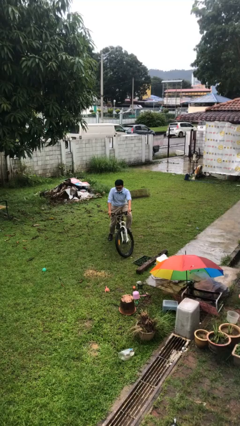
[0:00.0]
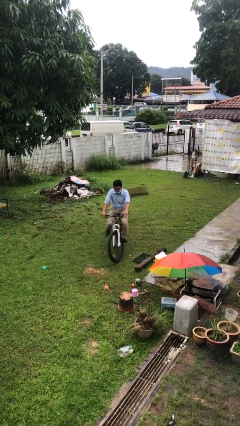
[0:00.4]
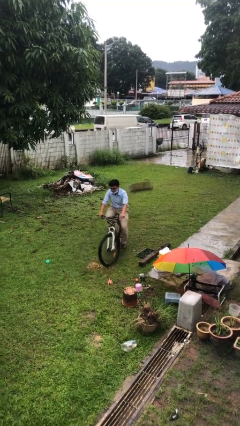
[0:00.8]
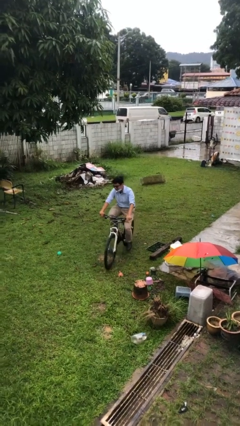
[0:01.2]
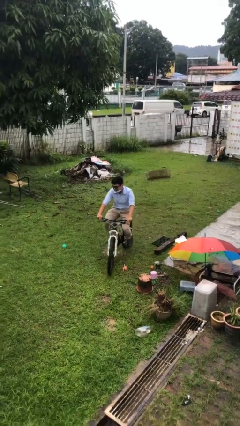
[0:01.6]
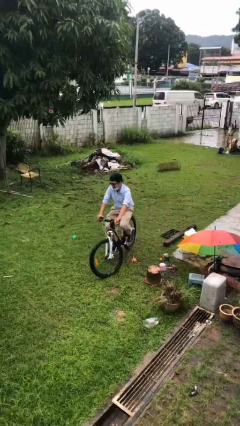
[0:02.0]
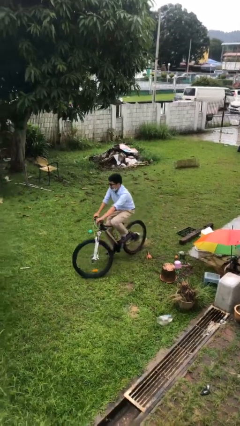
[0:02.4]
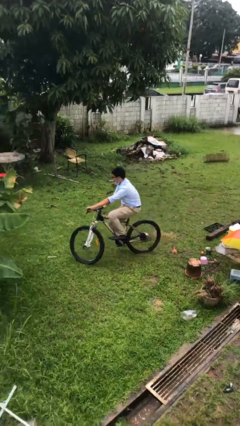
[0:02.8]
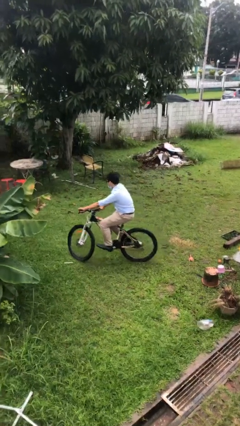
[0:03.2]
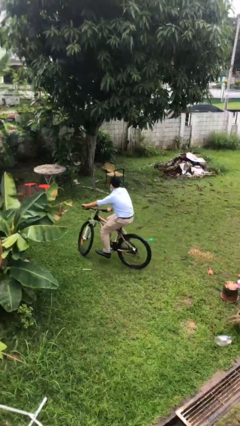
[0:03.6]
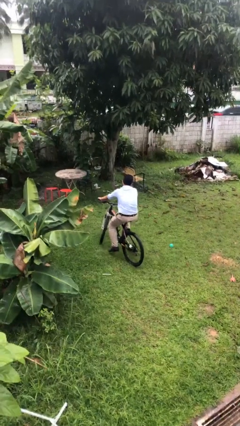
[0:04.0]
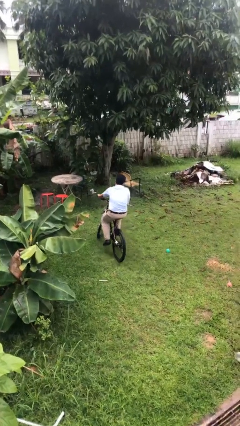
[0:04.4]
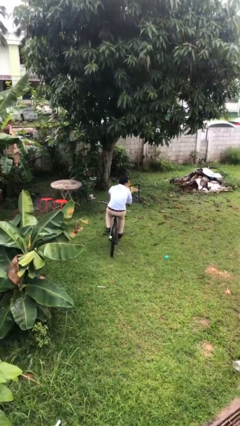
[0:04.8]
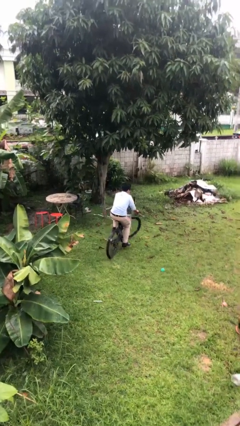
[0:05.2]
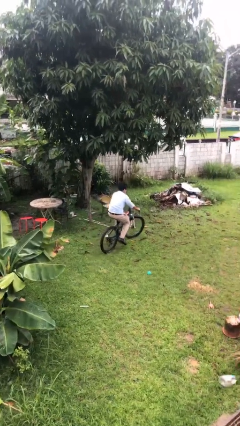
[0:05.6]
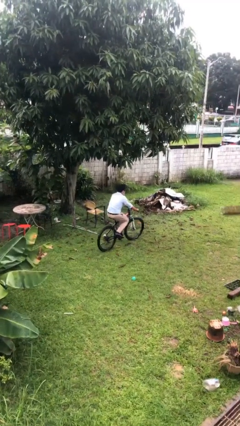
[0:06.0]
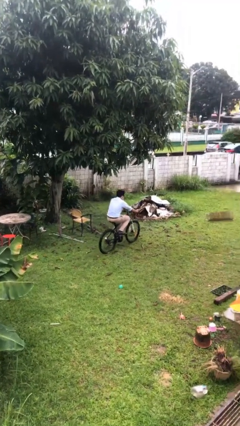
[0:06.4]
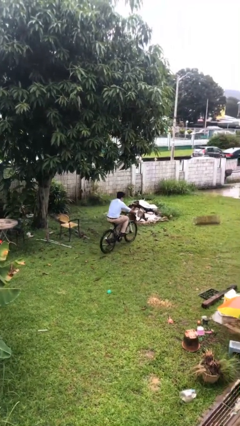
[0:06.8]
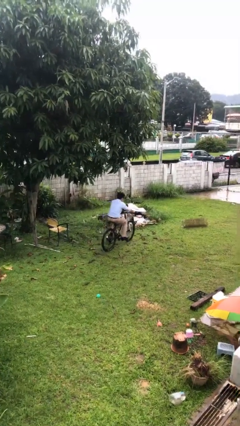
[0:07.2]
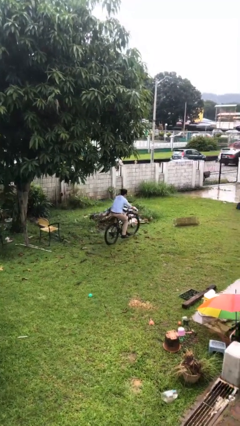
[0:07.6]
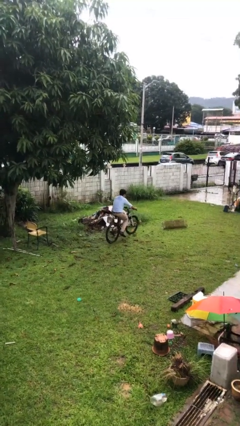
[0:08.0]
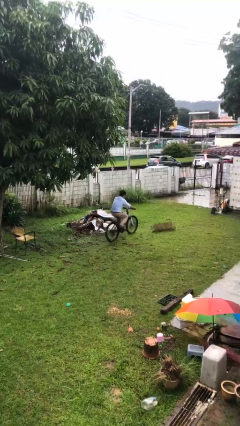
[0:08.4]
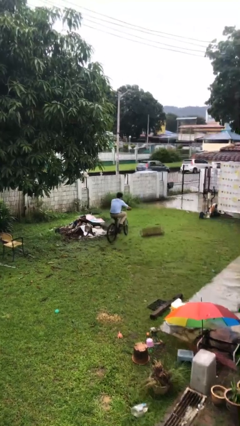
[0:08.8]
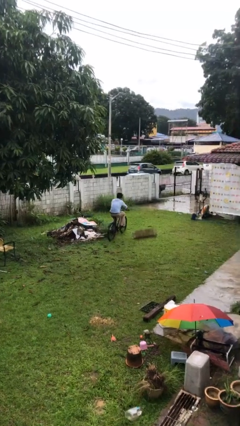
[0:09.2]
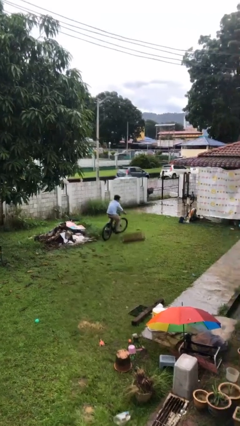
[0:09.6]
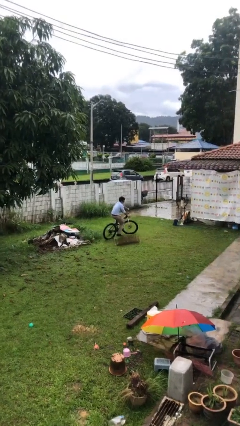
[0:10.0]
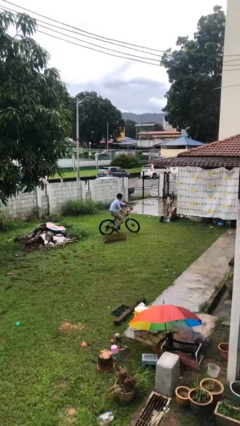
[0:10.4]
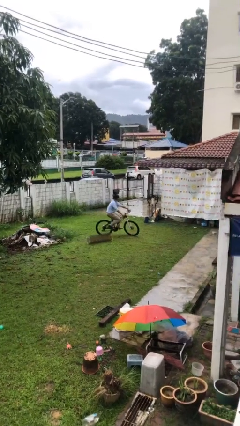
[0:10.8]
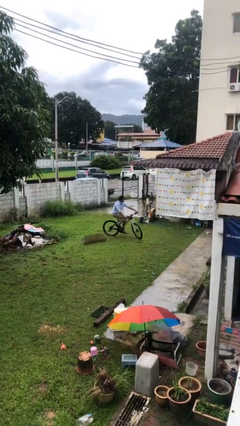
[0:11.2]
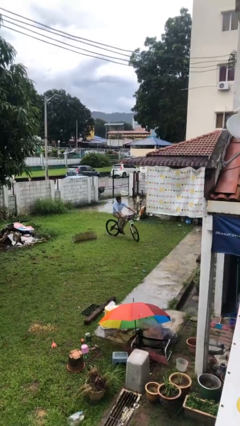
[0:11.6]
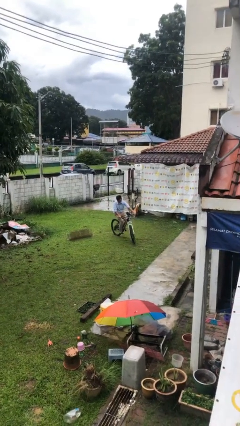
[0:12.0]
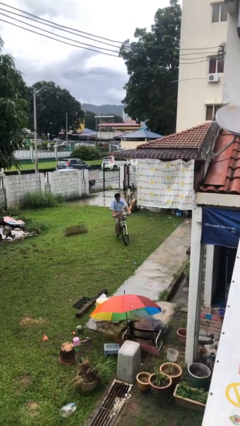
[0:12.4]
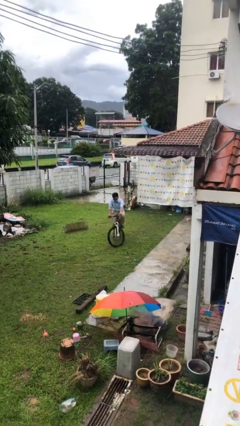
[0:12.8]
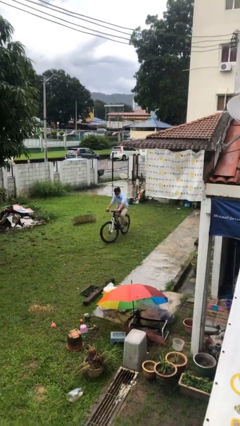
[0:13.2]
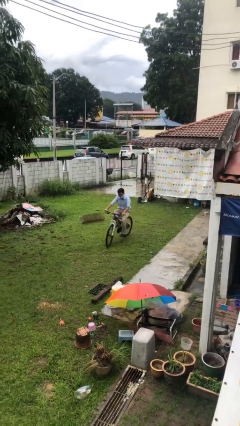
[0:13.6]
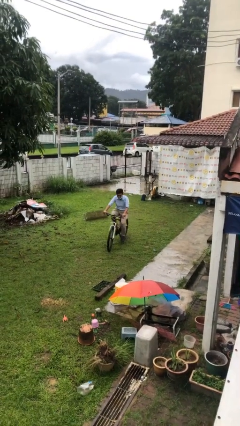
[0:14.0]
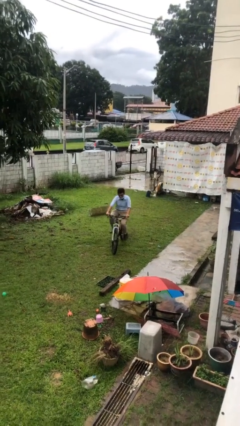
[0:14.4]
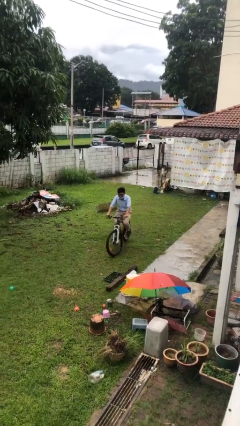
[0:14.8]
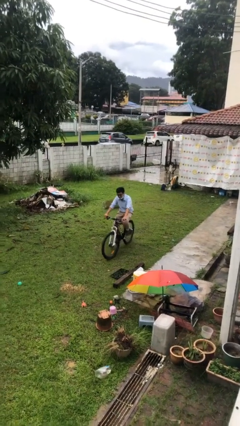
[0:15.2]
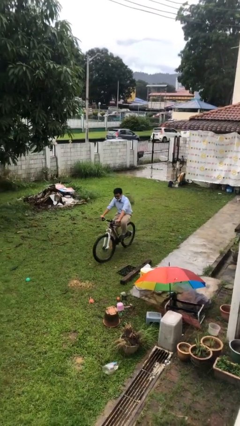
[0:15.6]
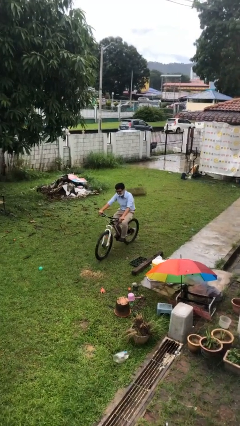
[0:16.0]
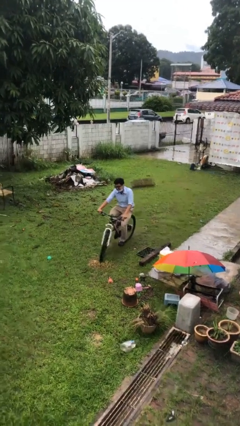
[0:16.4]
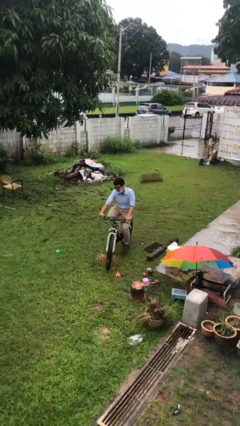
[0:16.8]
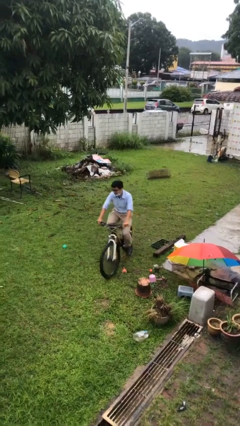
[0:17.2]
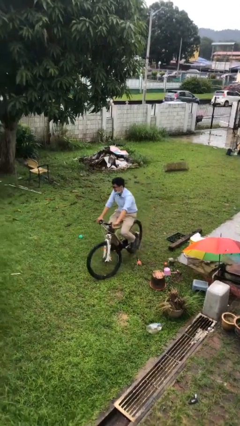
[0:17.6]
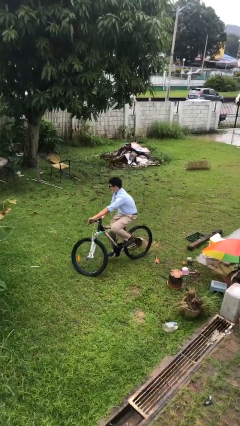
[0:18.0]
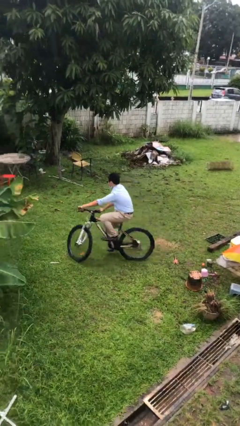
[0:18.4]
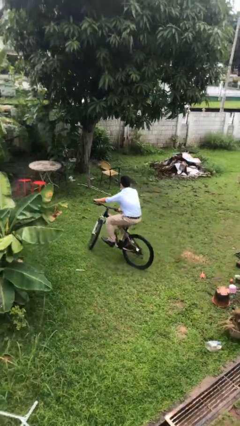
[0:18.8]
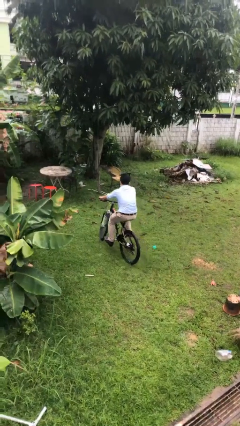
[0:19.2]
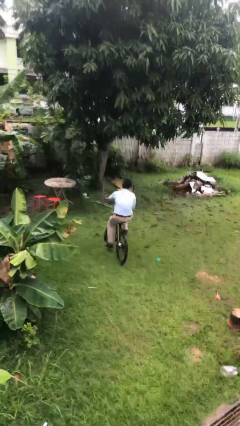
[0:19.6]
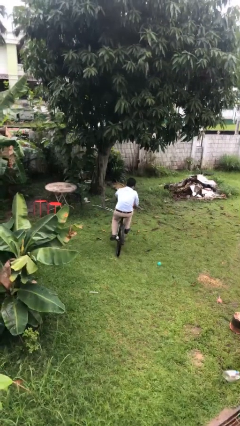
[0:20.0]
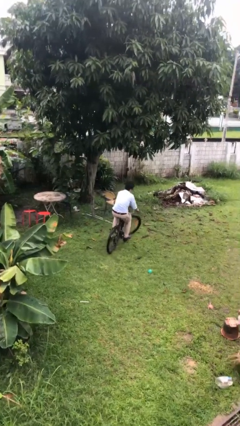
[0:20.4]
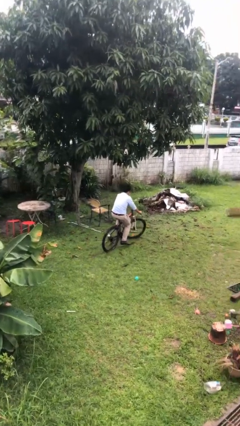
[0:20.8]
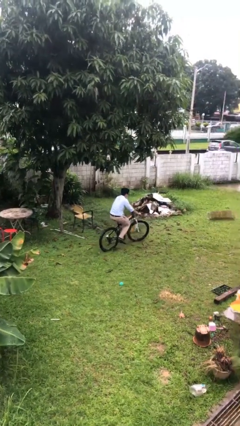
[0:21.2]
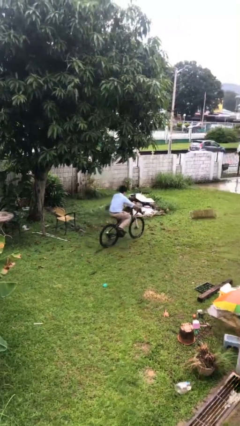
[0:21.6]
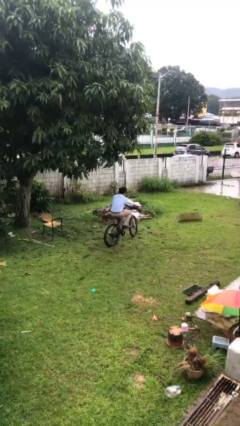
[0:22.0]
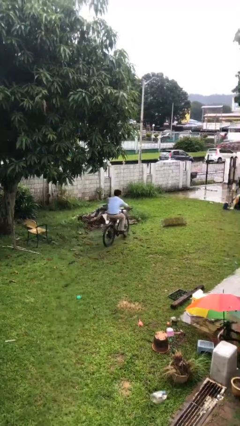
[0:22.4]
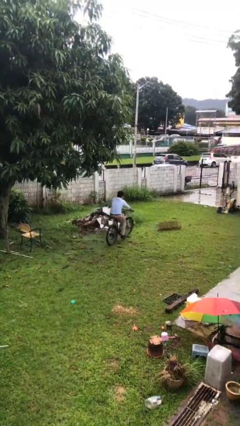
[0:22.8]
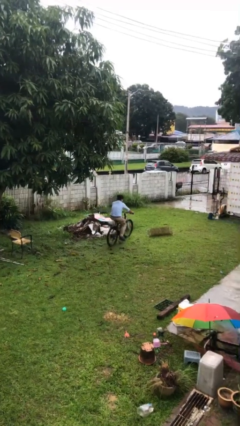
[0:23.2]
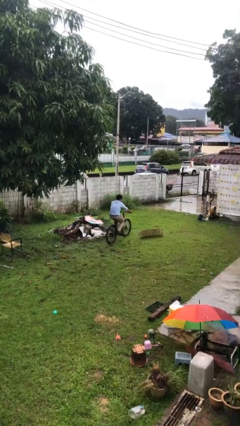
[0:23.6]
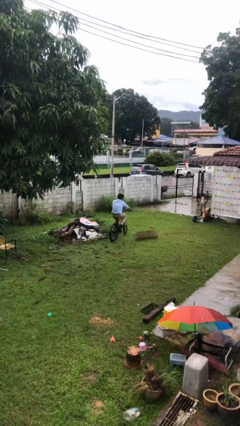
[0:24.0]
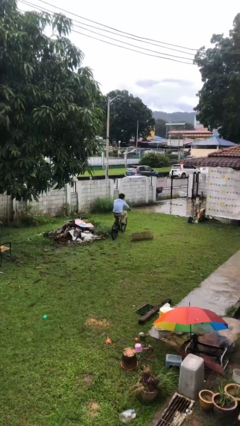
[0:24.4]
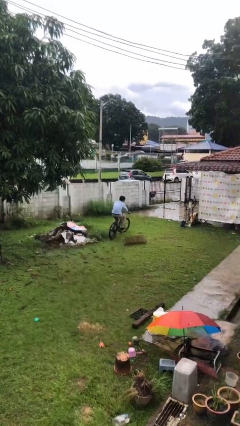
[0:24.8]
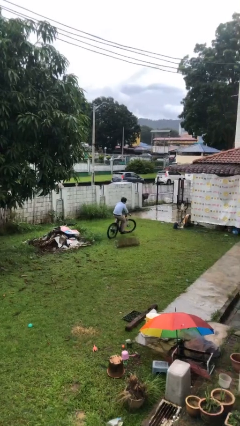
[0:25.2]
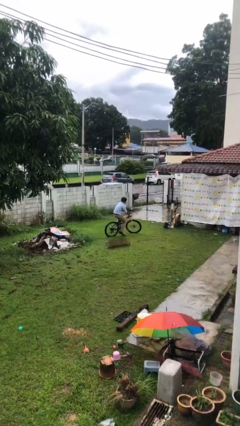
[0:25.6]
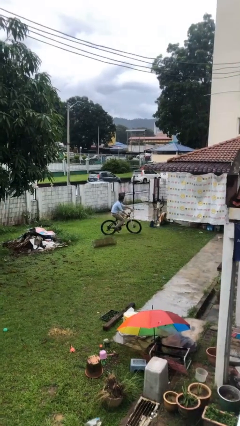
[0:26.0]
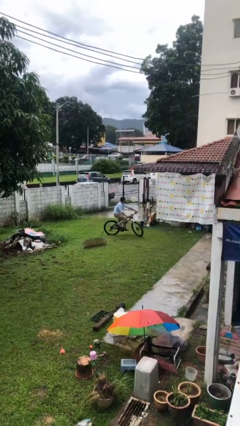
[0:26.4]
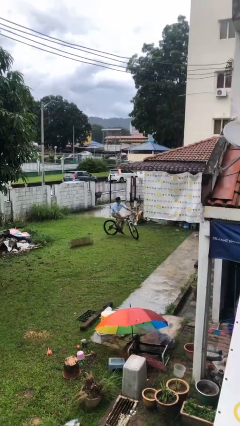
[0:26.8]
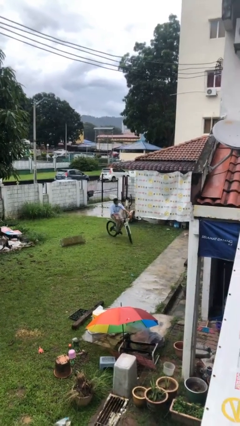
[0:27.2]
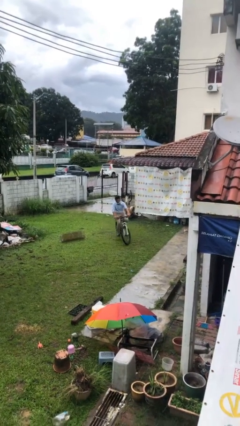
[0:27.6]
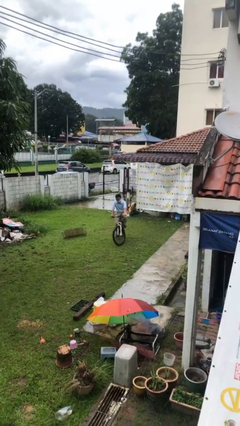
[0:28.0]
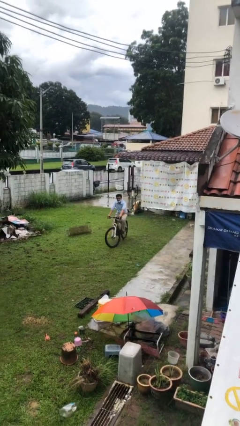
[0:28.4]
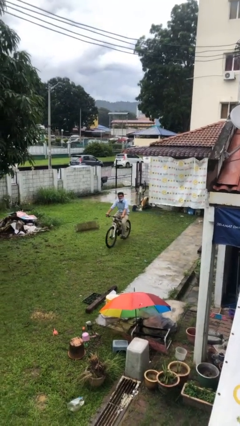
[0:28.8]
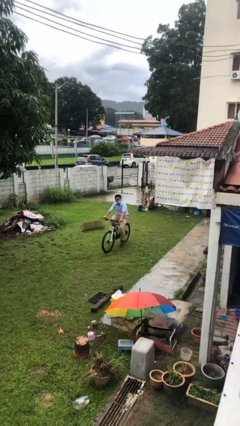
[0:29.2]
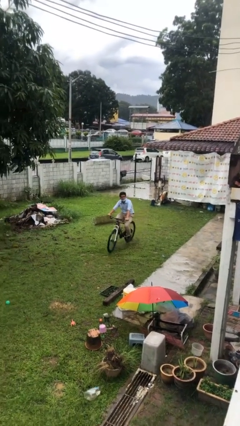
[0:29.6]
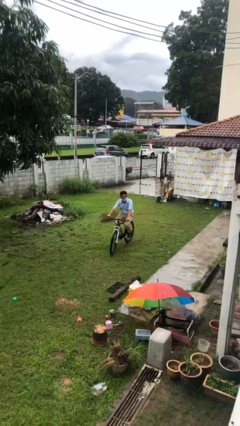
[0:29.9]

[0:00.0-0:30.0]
person rides bicycle

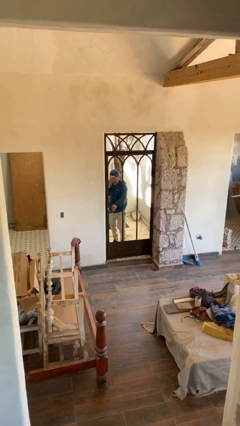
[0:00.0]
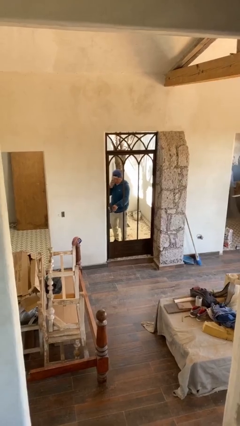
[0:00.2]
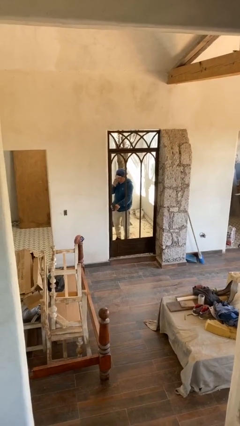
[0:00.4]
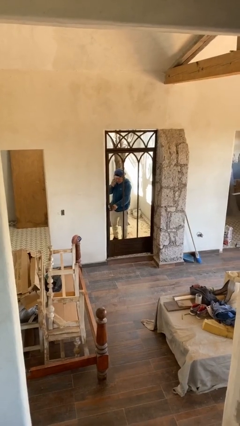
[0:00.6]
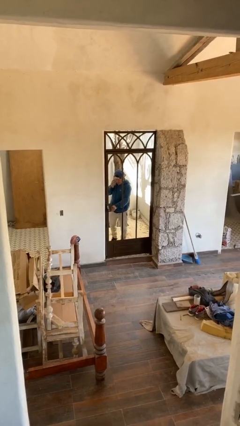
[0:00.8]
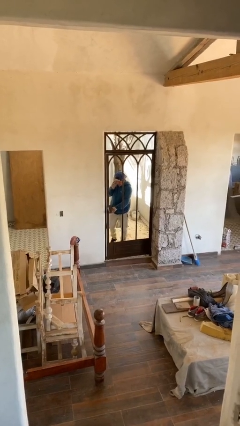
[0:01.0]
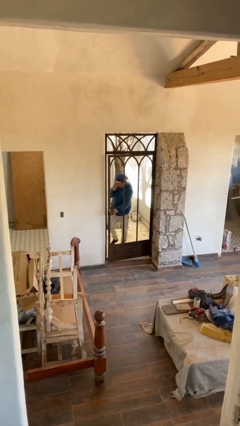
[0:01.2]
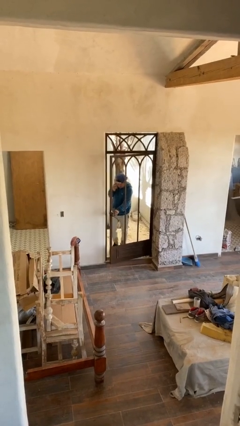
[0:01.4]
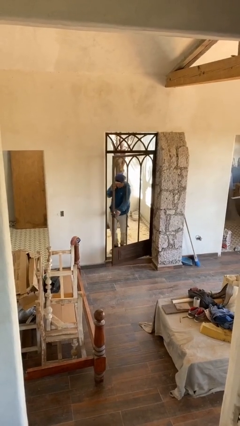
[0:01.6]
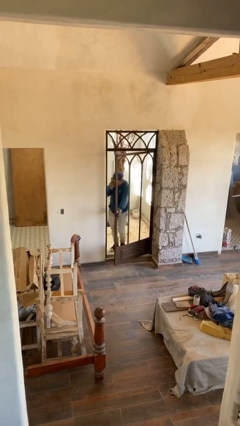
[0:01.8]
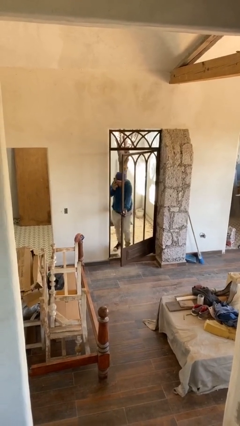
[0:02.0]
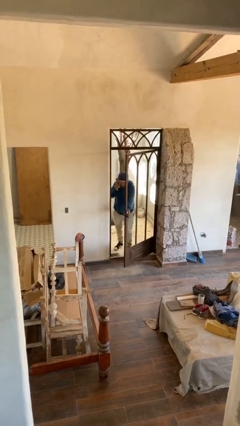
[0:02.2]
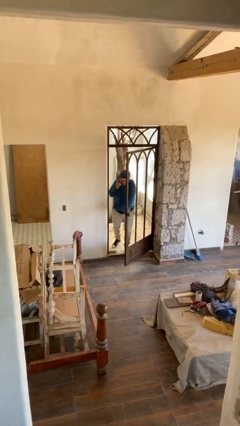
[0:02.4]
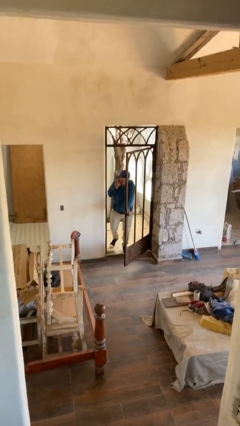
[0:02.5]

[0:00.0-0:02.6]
person opens facility door

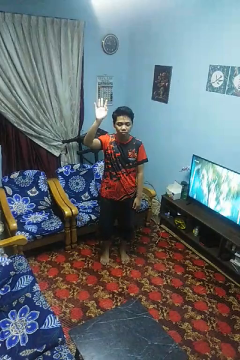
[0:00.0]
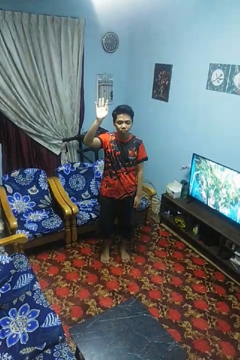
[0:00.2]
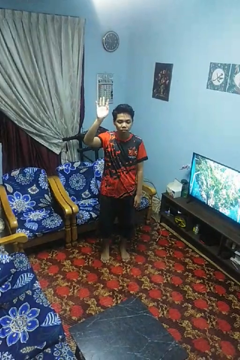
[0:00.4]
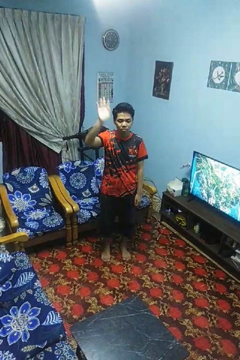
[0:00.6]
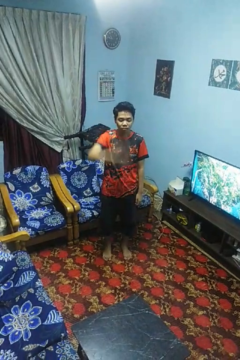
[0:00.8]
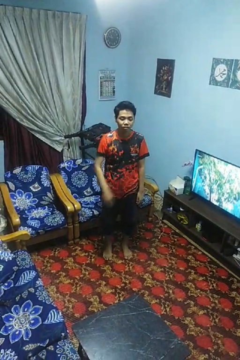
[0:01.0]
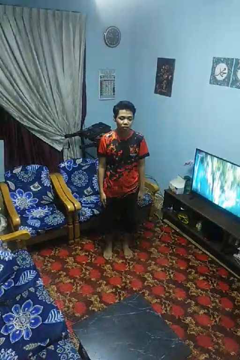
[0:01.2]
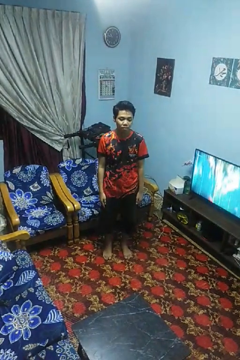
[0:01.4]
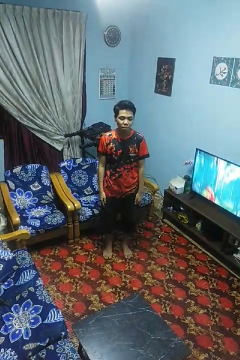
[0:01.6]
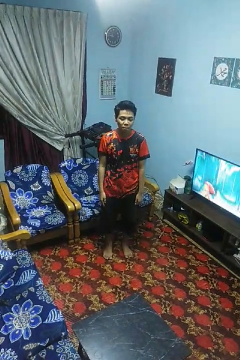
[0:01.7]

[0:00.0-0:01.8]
person gestures swipe down
